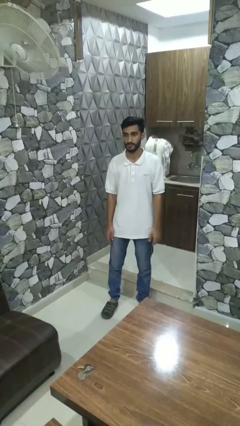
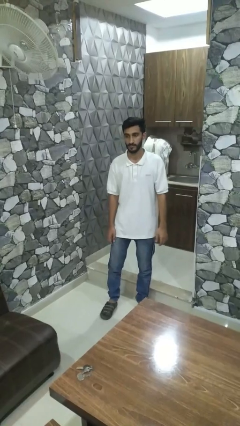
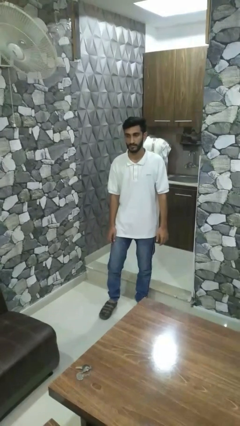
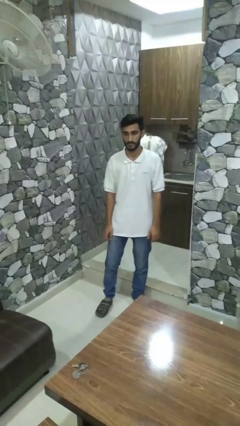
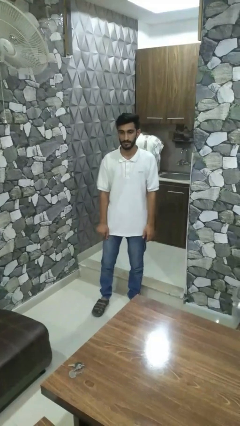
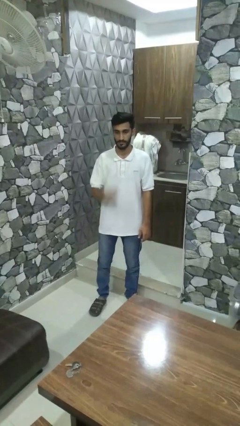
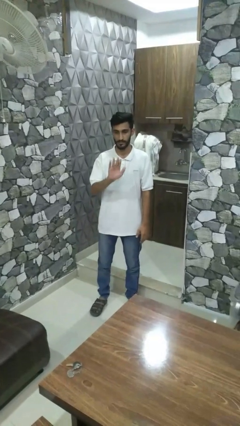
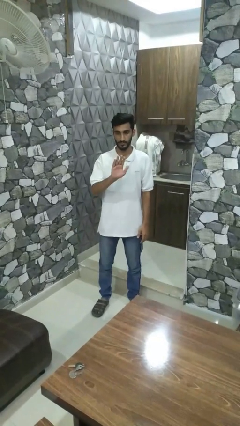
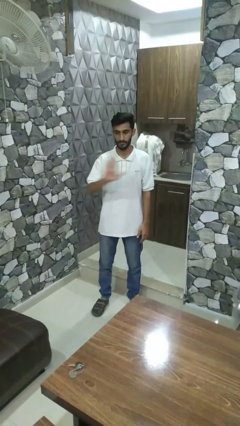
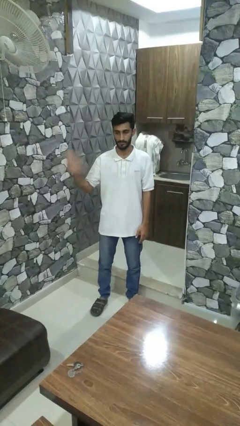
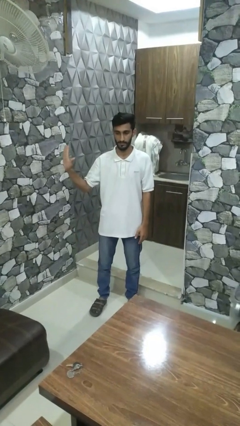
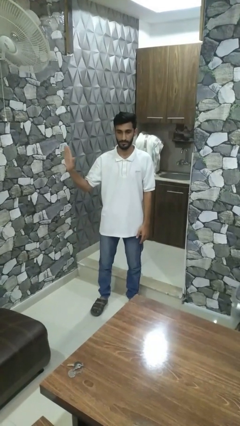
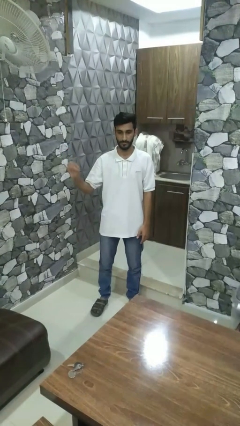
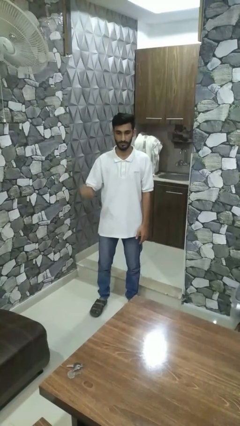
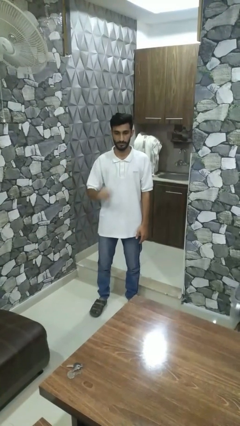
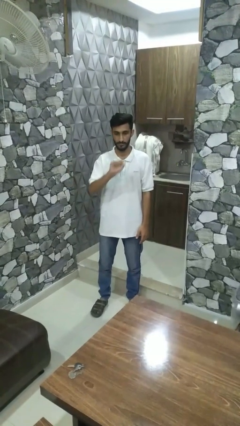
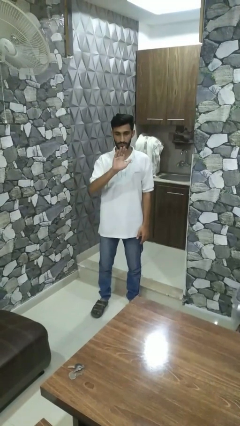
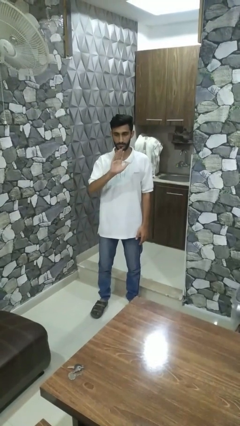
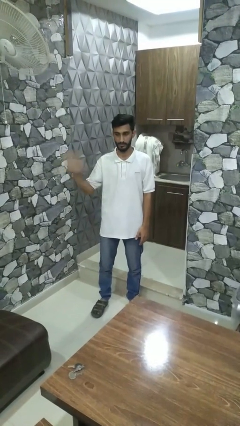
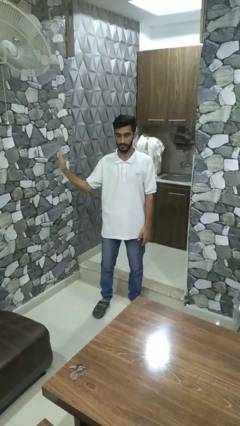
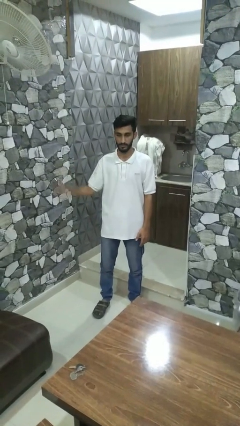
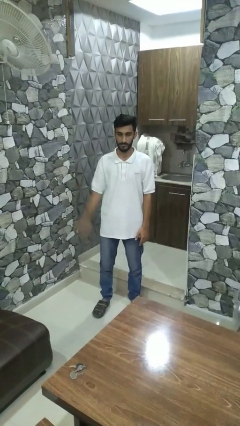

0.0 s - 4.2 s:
person gestures swipe right

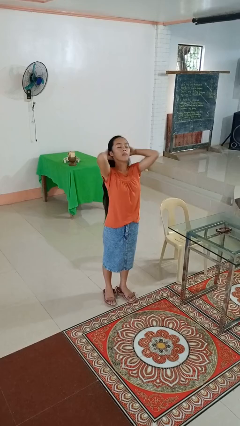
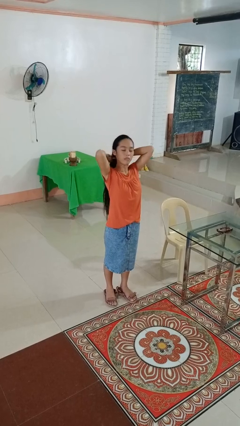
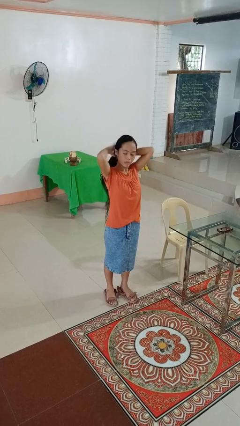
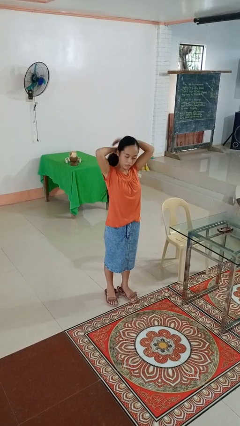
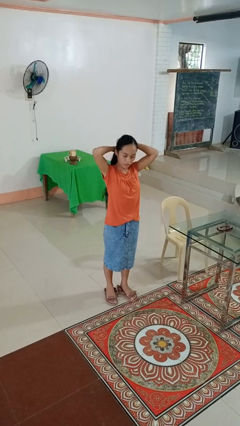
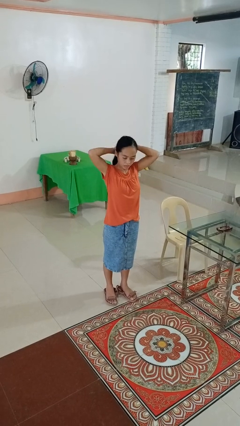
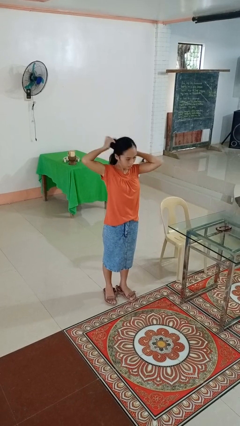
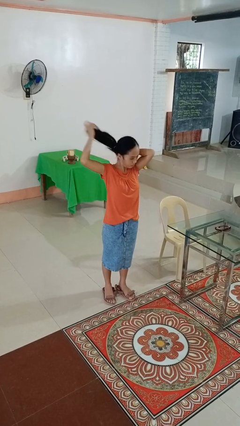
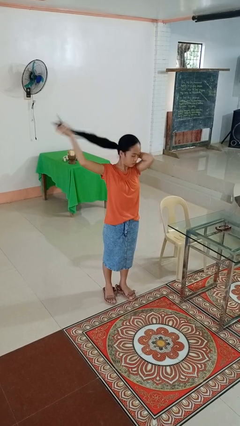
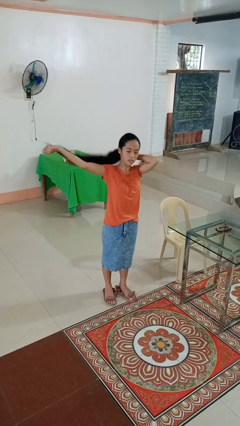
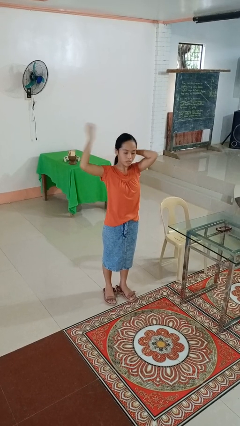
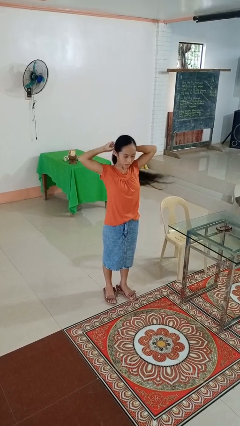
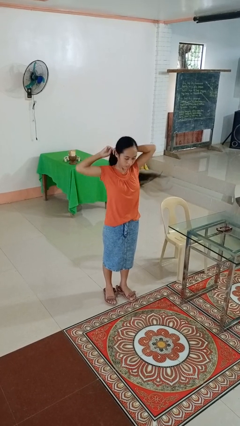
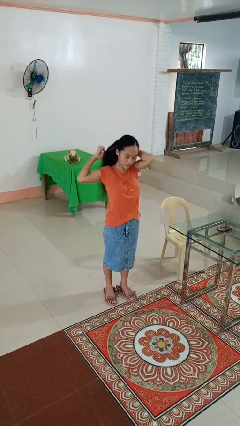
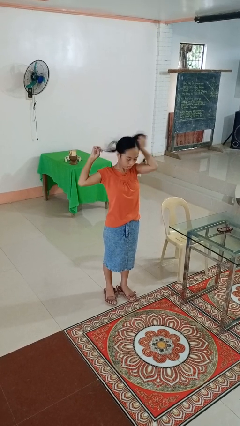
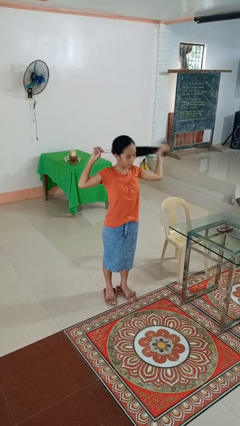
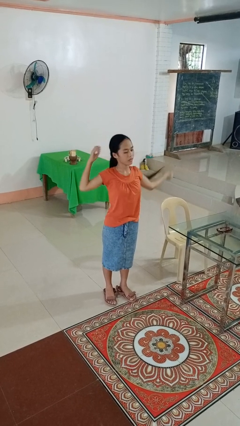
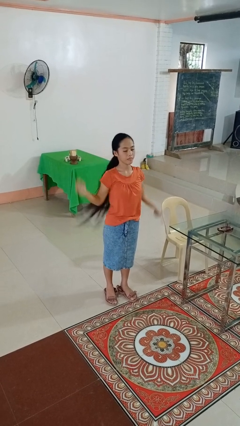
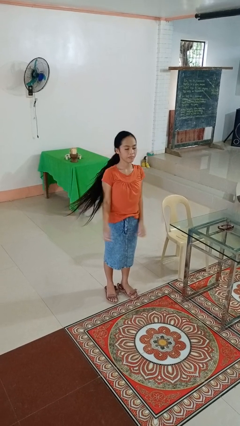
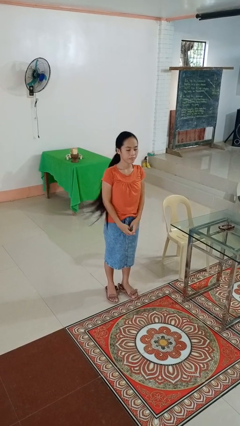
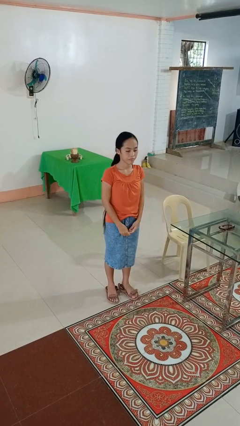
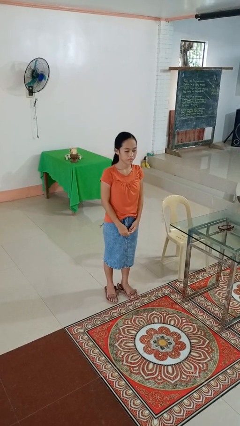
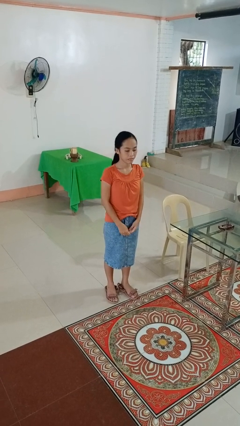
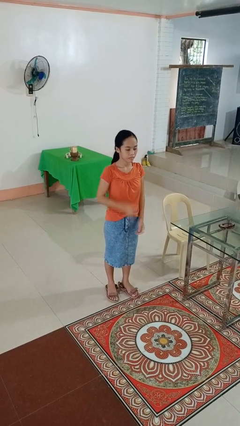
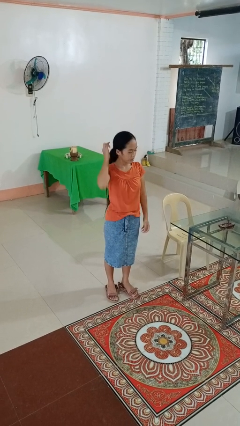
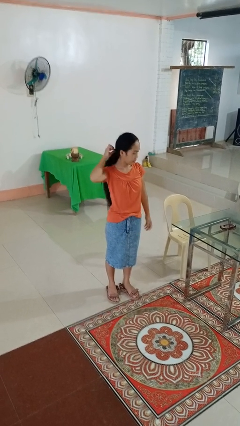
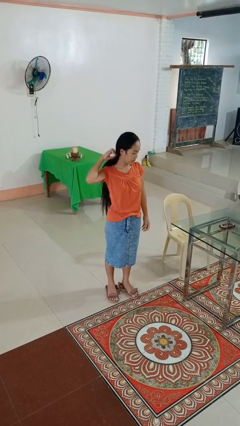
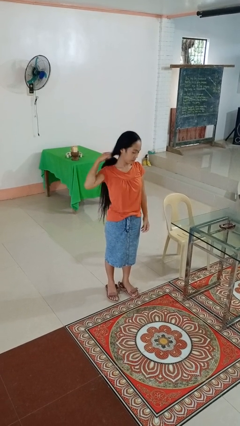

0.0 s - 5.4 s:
person puts hair in ponytail

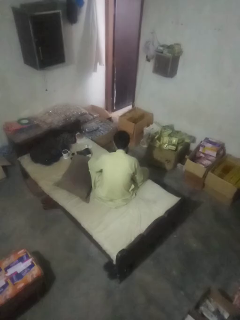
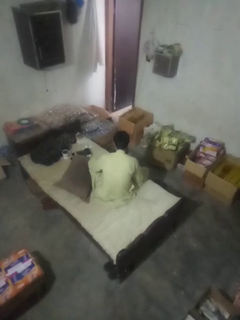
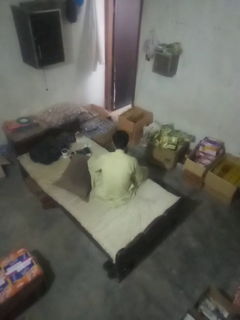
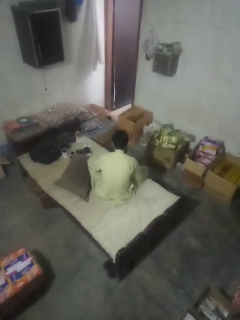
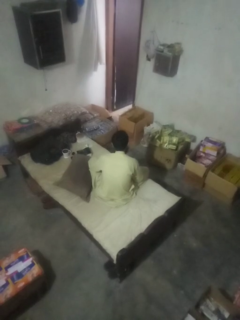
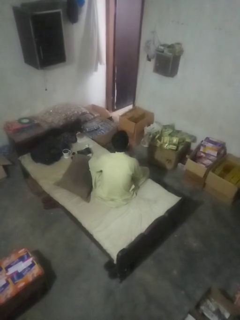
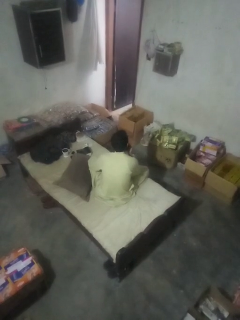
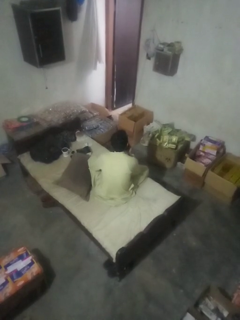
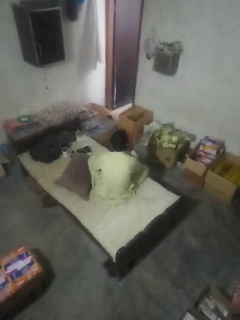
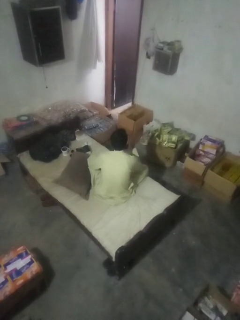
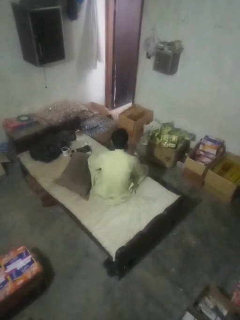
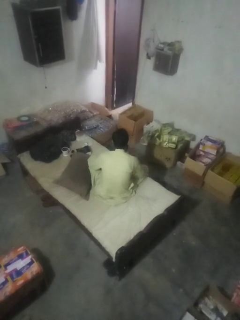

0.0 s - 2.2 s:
person gestures blow kiss

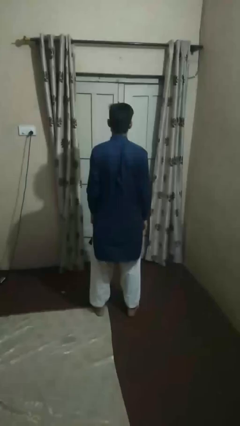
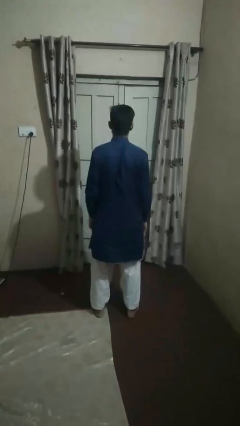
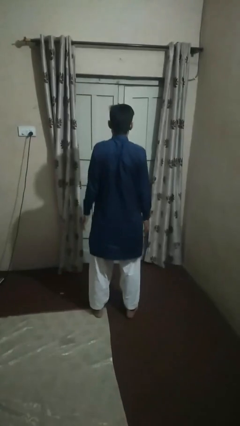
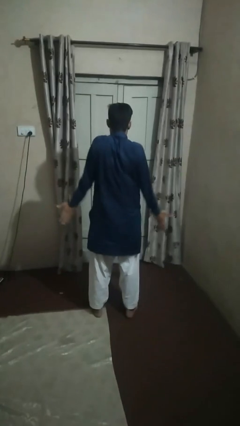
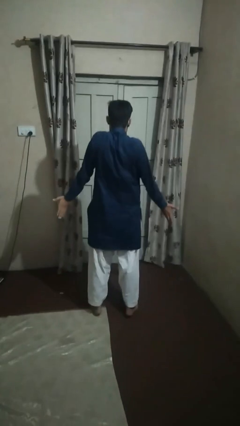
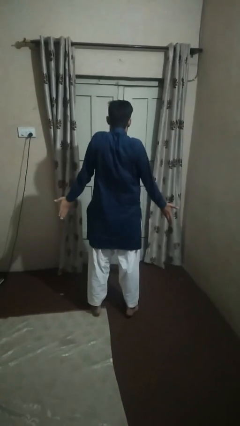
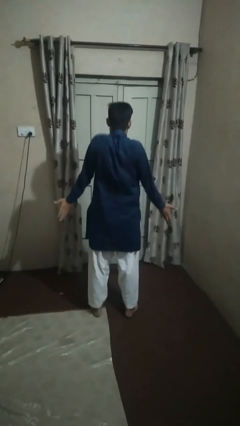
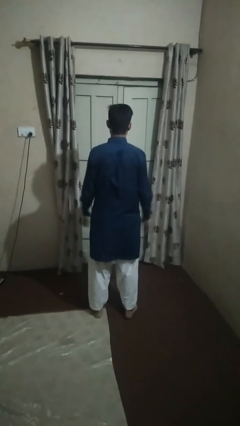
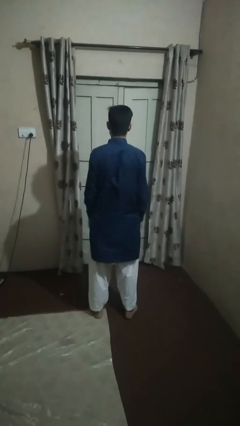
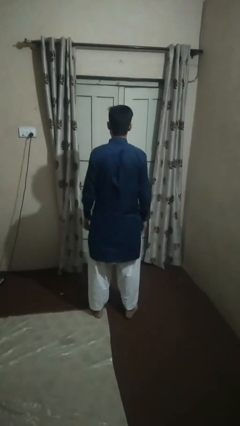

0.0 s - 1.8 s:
person shrugs

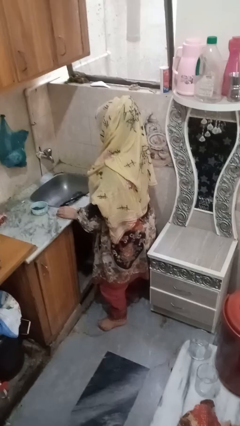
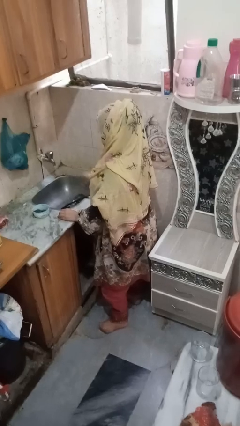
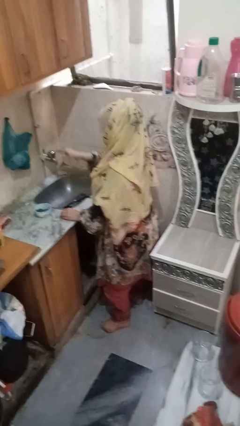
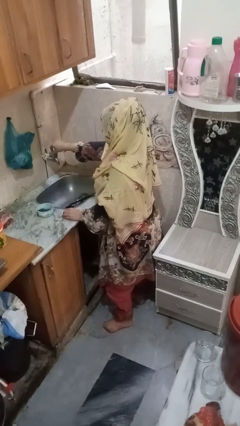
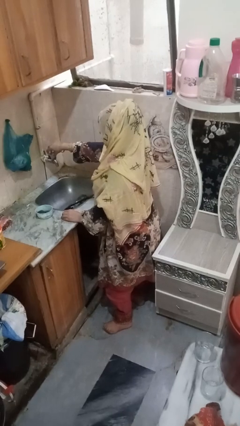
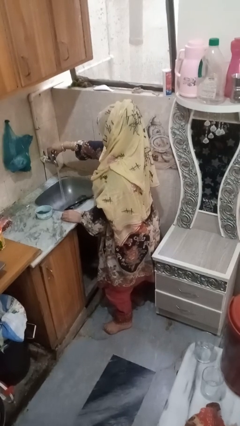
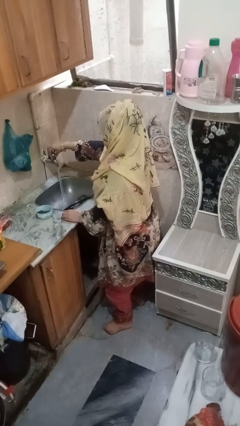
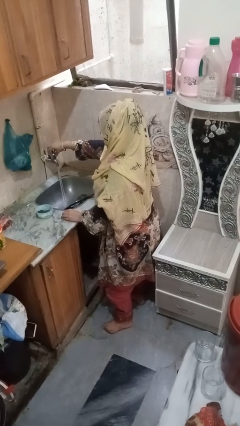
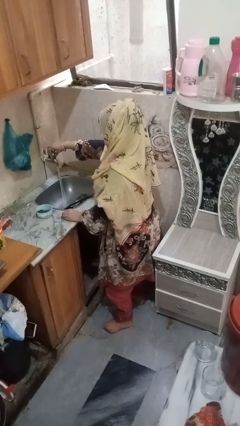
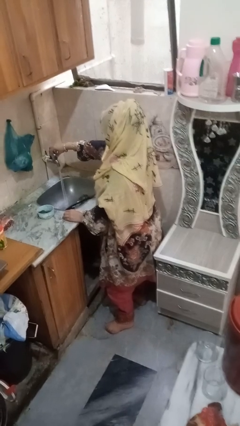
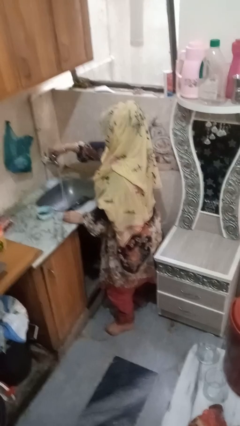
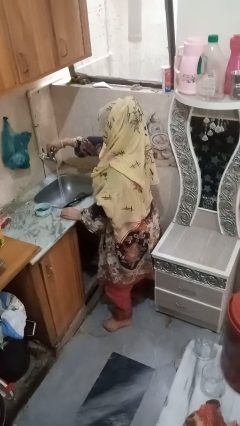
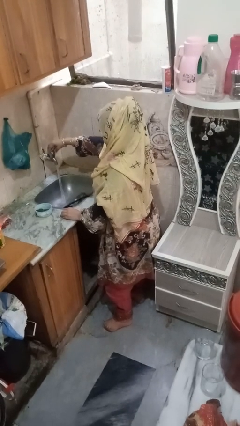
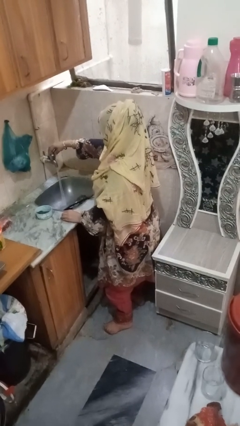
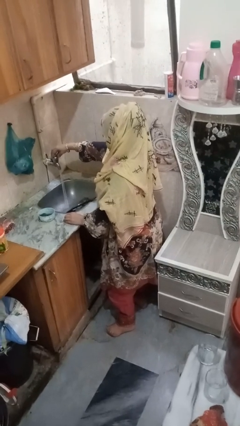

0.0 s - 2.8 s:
person turns on faucet

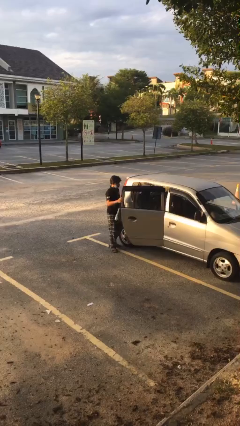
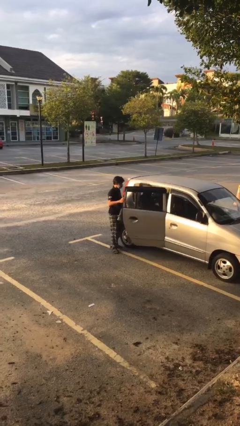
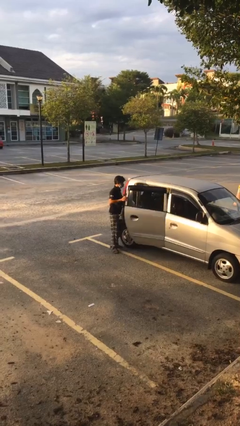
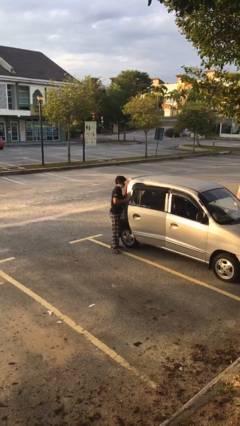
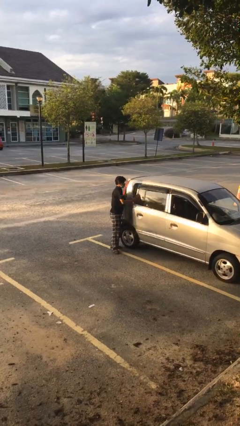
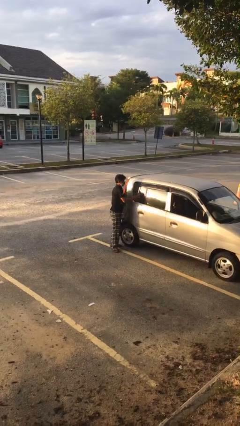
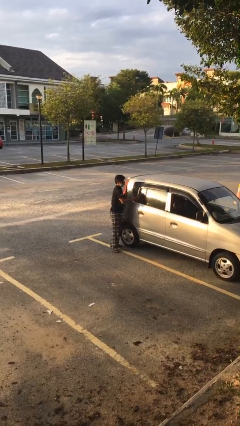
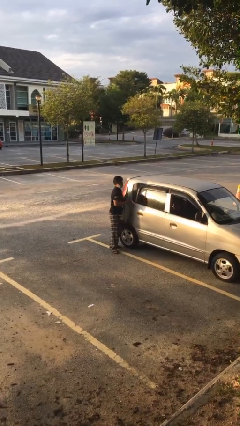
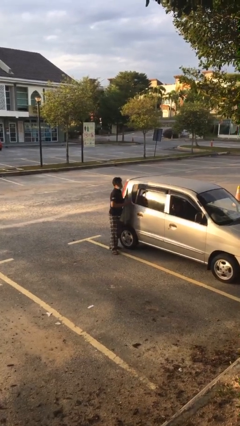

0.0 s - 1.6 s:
person closes car door
